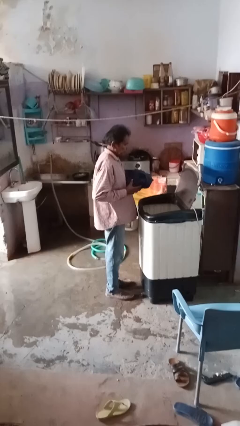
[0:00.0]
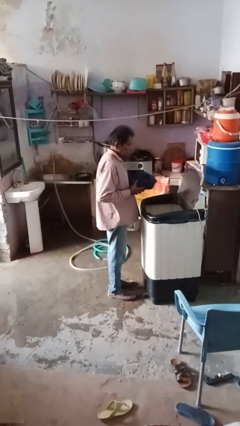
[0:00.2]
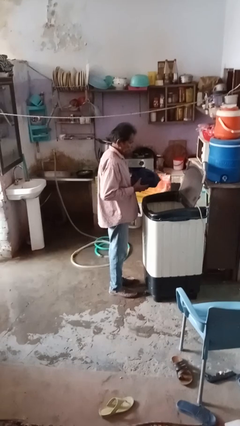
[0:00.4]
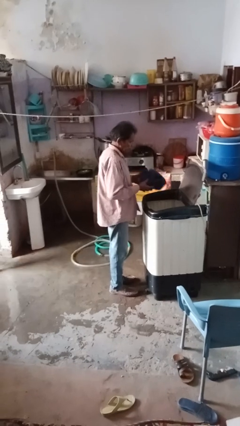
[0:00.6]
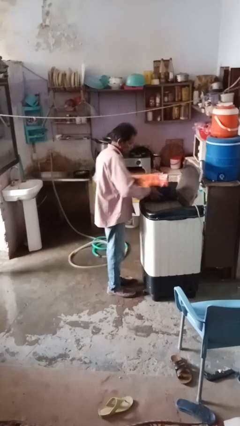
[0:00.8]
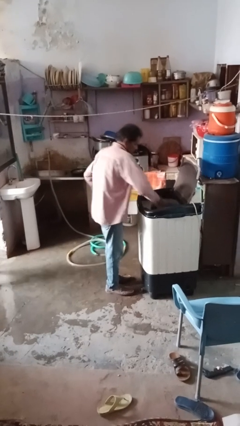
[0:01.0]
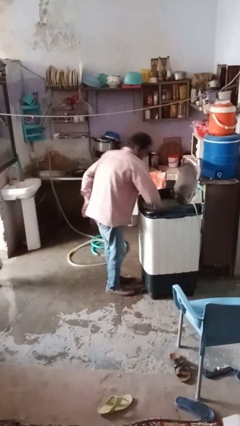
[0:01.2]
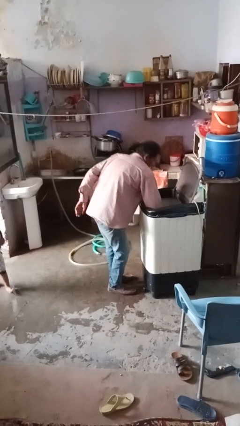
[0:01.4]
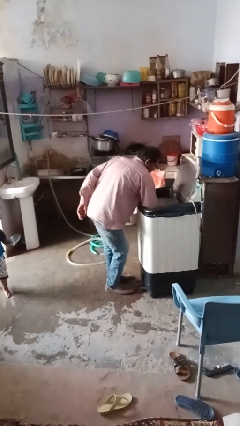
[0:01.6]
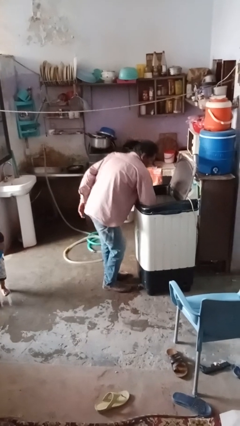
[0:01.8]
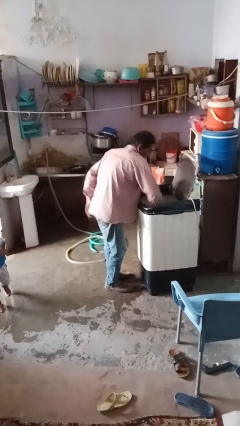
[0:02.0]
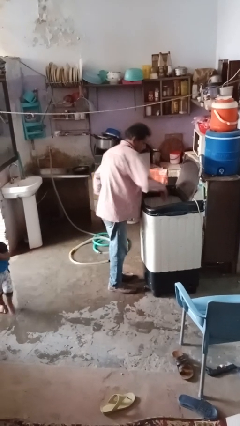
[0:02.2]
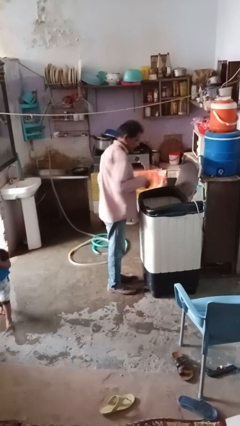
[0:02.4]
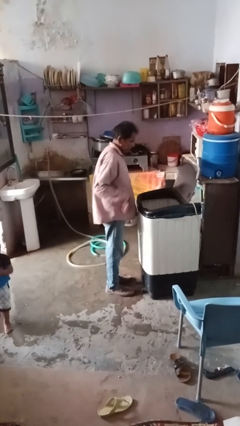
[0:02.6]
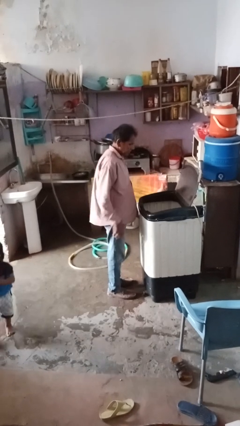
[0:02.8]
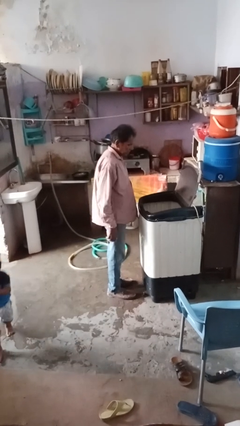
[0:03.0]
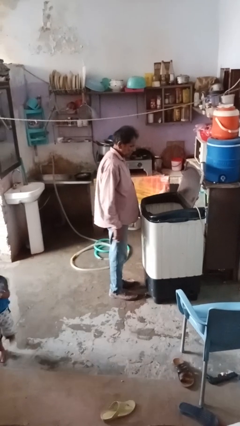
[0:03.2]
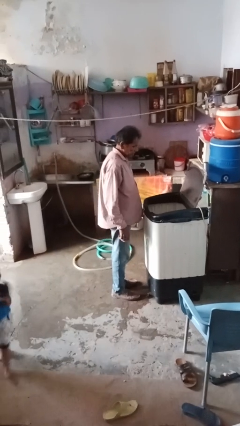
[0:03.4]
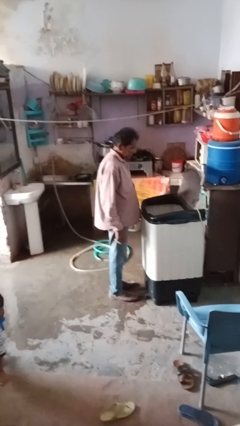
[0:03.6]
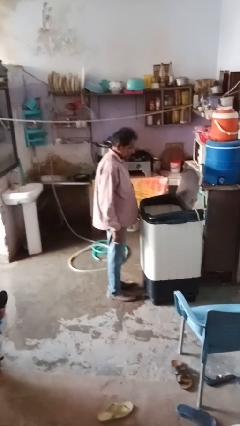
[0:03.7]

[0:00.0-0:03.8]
person loads clotheswasher

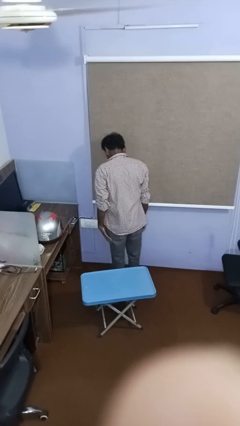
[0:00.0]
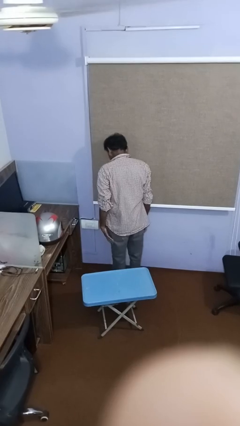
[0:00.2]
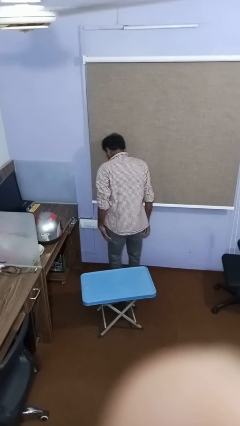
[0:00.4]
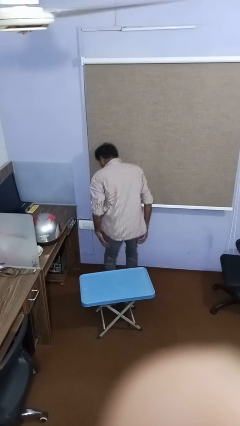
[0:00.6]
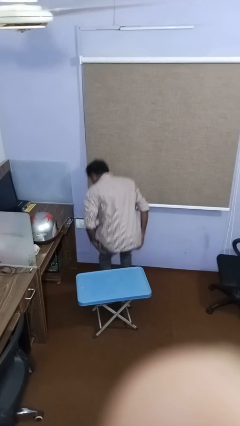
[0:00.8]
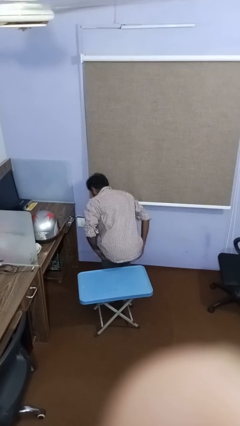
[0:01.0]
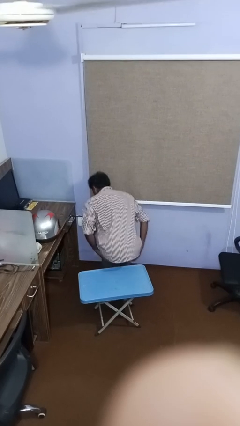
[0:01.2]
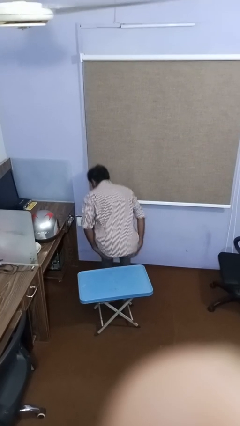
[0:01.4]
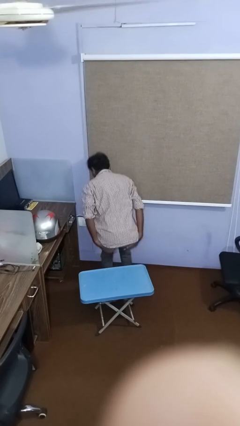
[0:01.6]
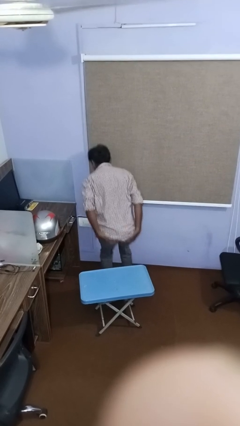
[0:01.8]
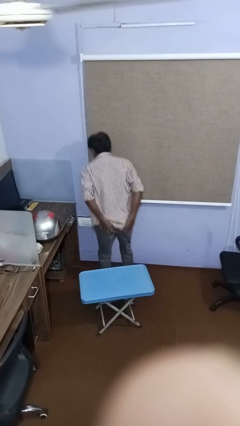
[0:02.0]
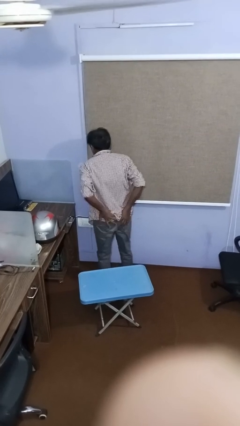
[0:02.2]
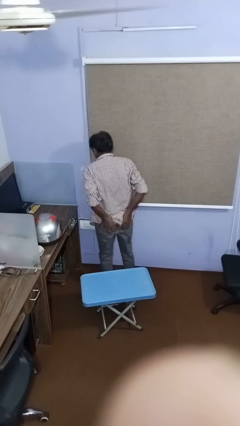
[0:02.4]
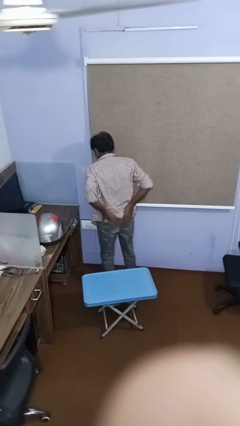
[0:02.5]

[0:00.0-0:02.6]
person bumps into table

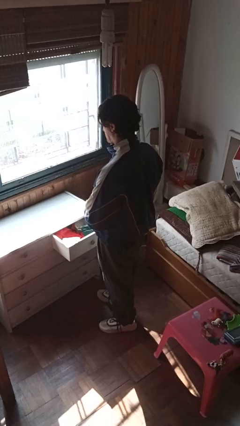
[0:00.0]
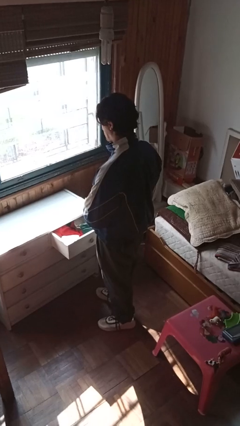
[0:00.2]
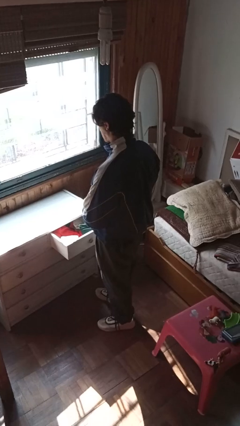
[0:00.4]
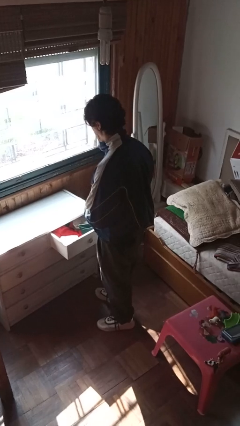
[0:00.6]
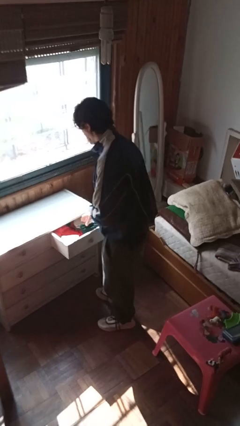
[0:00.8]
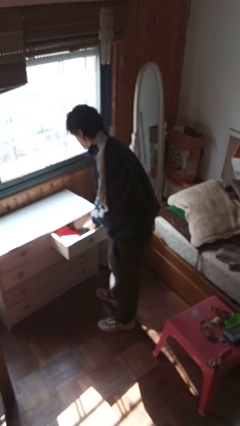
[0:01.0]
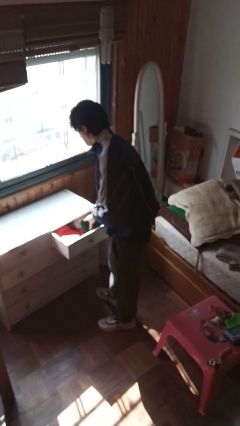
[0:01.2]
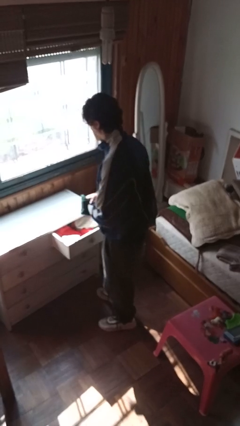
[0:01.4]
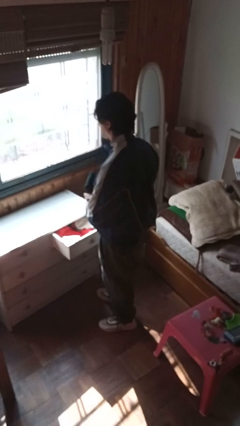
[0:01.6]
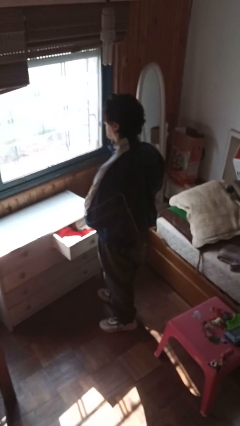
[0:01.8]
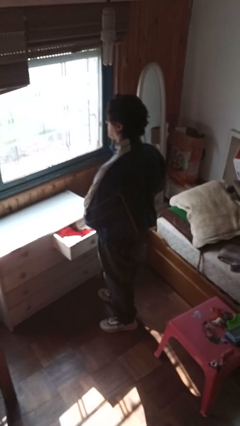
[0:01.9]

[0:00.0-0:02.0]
person takes clothes from dresser

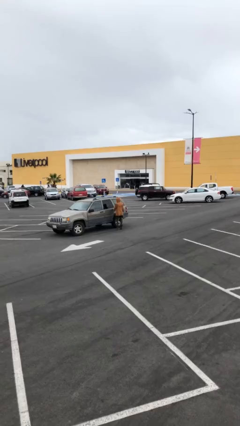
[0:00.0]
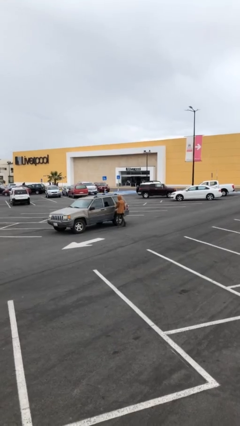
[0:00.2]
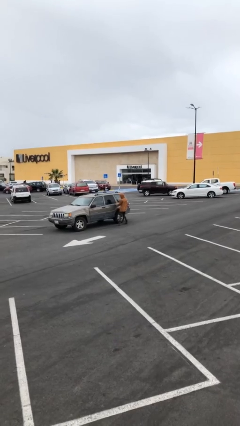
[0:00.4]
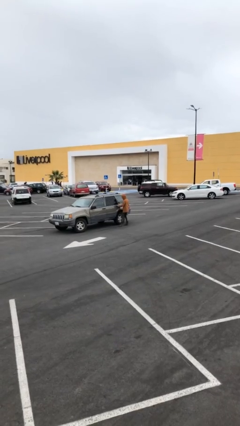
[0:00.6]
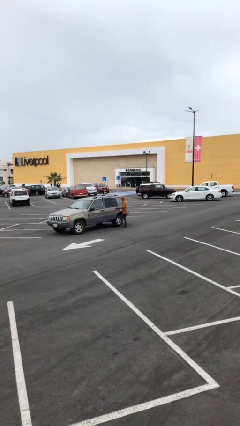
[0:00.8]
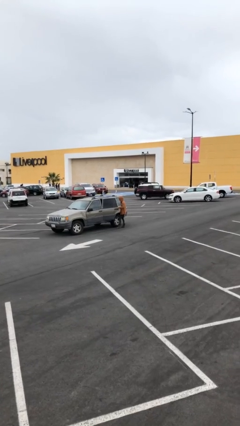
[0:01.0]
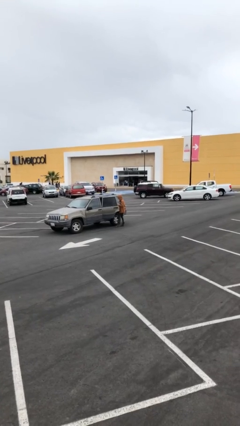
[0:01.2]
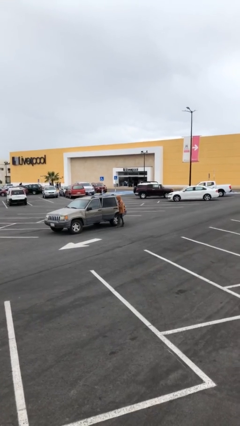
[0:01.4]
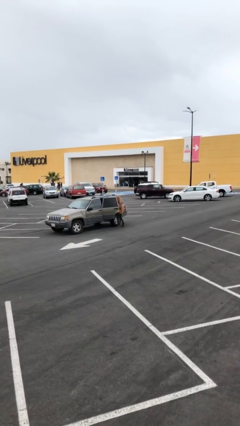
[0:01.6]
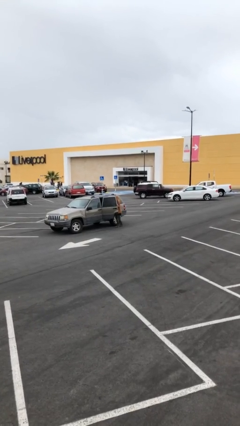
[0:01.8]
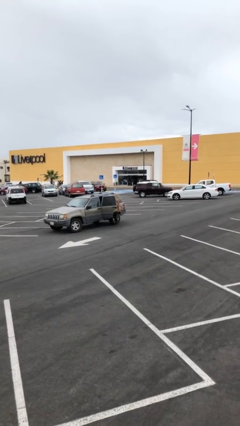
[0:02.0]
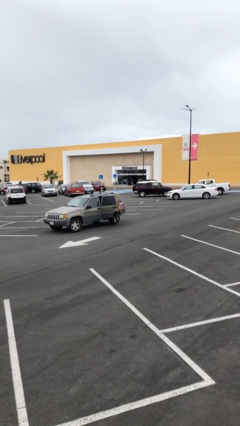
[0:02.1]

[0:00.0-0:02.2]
person opens car door

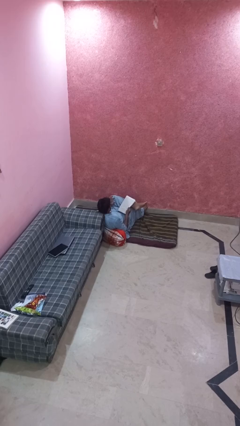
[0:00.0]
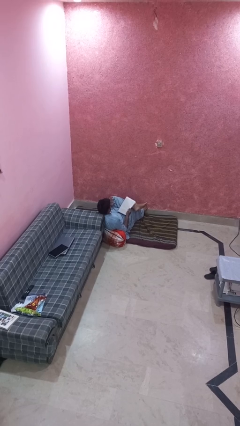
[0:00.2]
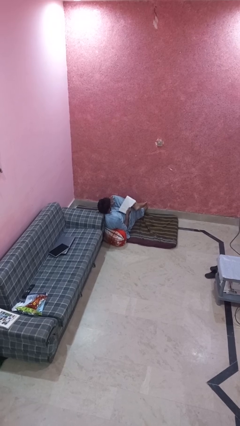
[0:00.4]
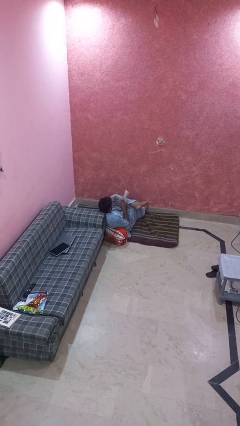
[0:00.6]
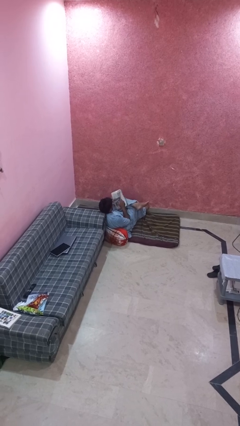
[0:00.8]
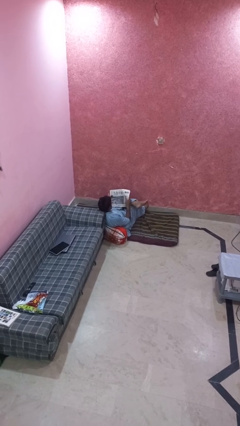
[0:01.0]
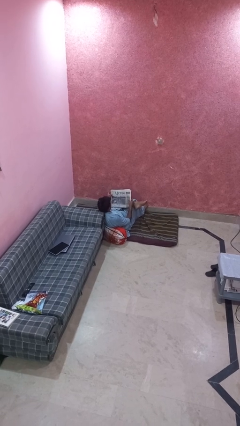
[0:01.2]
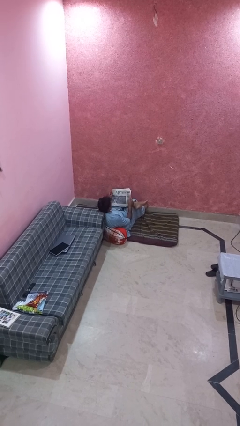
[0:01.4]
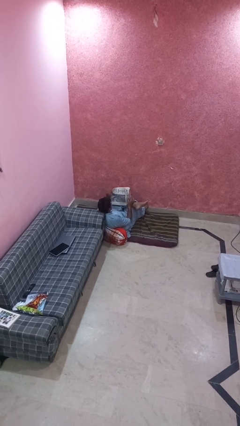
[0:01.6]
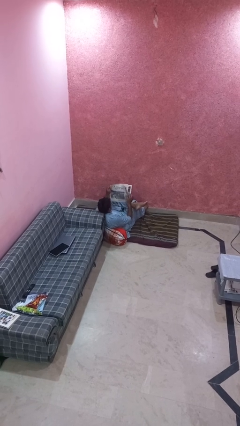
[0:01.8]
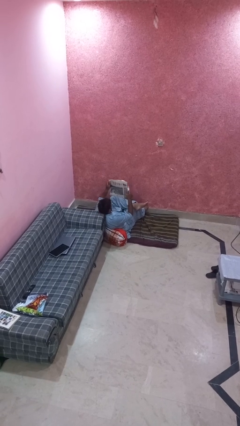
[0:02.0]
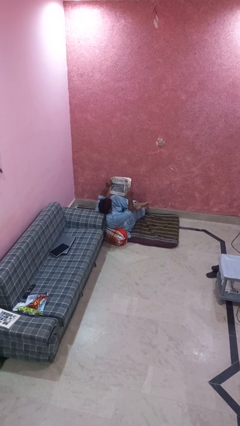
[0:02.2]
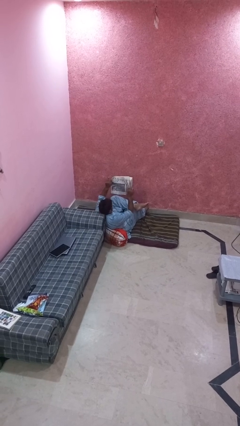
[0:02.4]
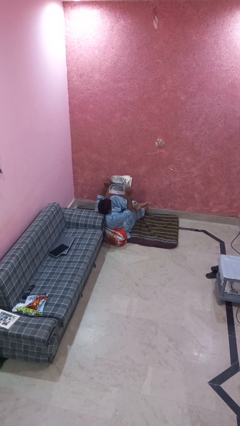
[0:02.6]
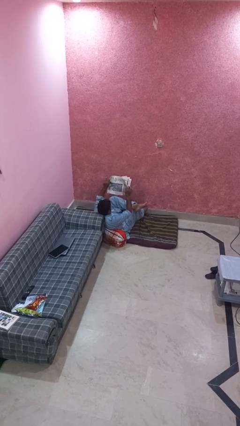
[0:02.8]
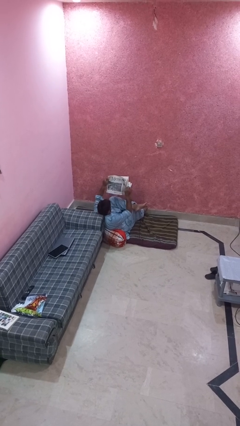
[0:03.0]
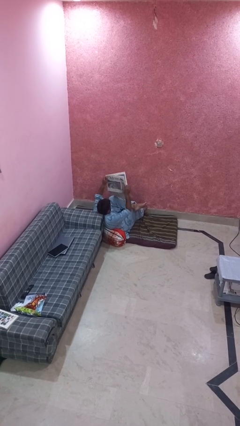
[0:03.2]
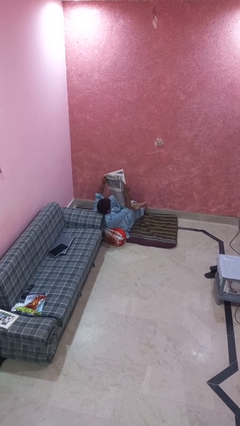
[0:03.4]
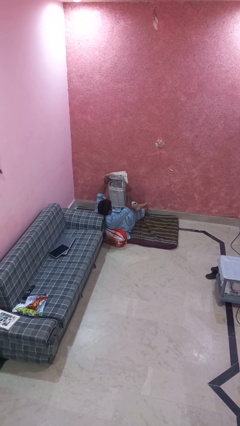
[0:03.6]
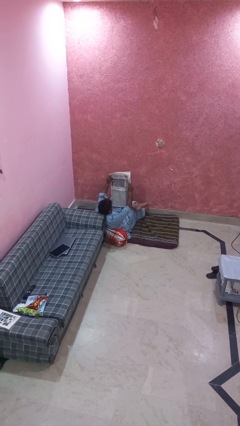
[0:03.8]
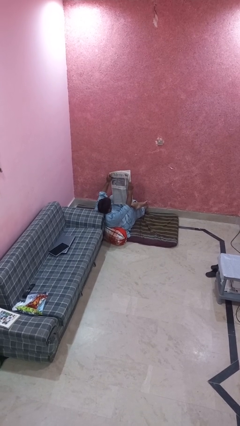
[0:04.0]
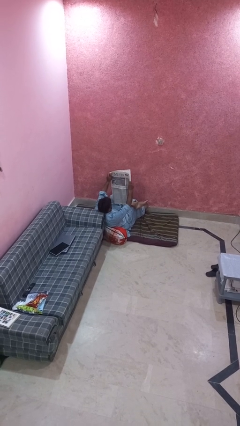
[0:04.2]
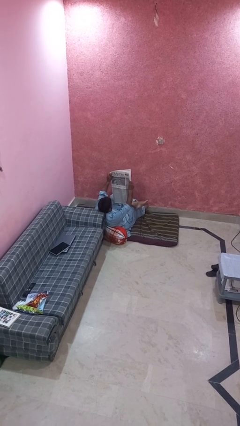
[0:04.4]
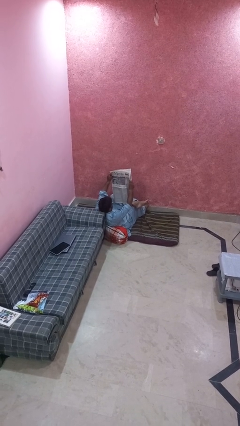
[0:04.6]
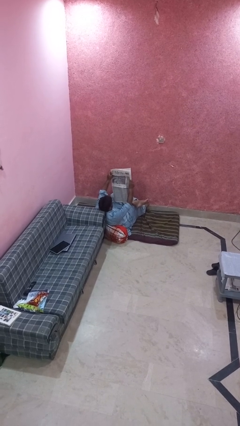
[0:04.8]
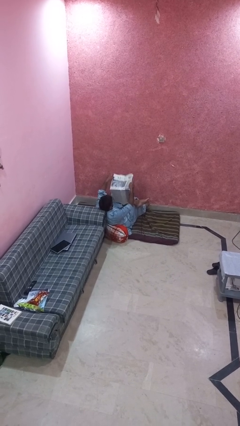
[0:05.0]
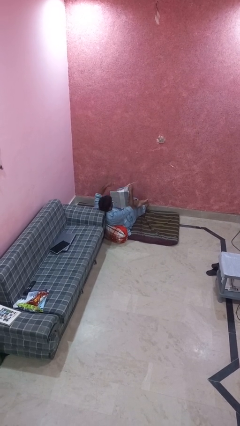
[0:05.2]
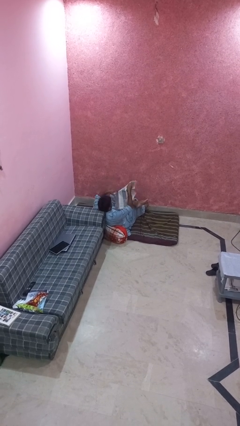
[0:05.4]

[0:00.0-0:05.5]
person reads newspaper

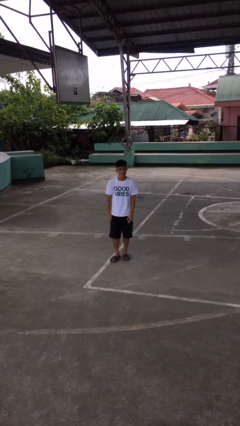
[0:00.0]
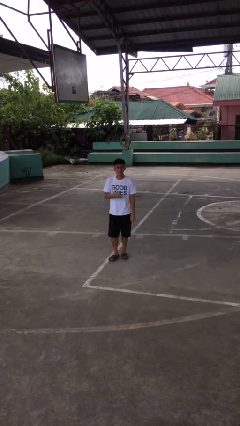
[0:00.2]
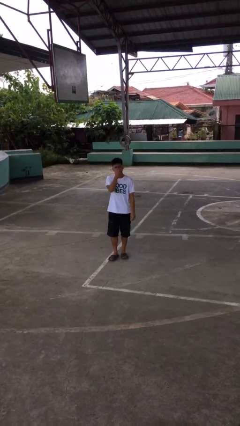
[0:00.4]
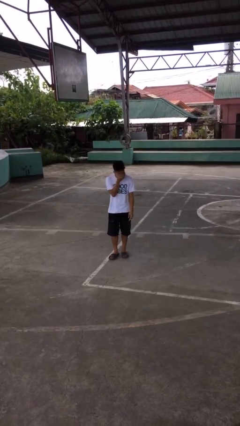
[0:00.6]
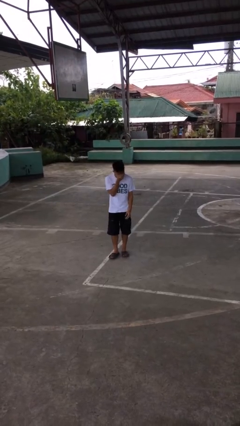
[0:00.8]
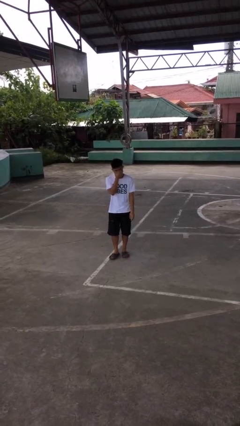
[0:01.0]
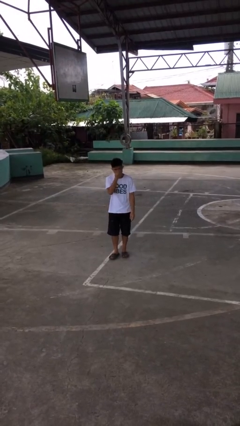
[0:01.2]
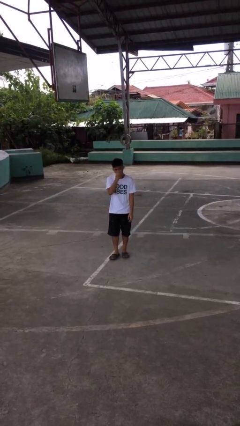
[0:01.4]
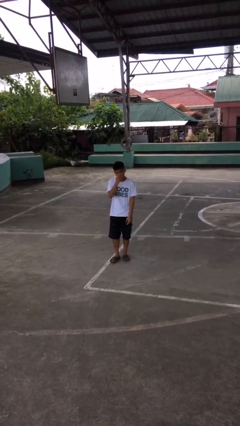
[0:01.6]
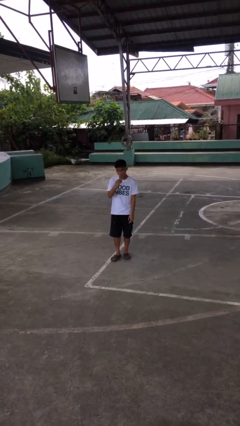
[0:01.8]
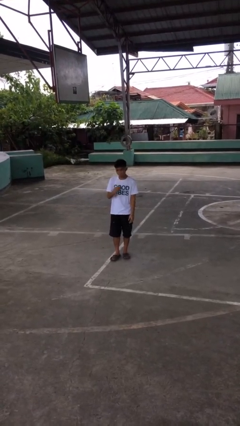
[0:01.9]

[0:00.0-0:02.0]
person sneezes into hand
